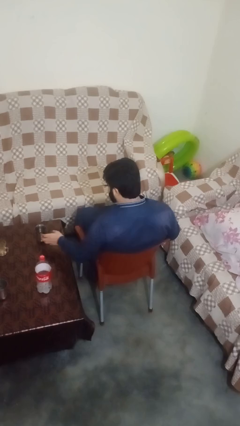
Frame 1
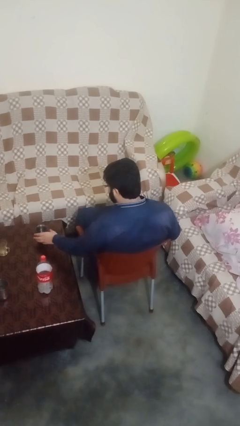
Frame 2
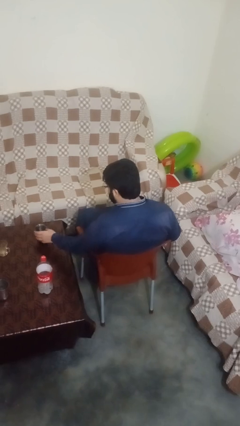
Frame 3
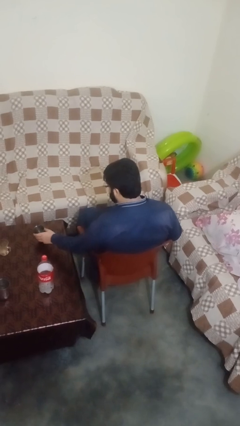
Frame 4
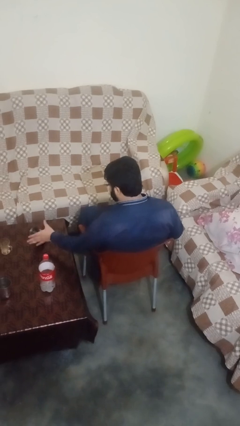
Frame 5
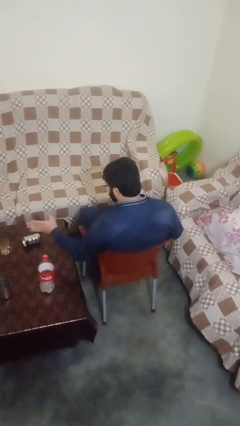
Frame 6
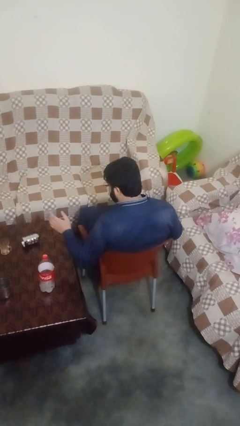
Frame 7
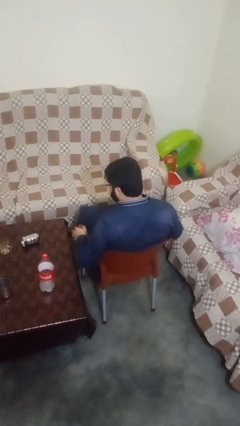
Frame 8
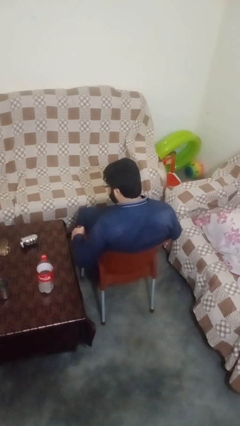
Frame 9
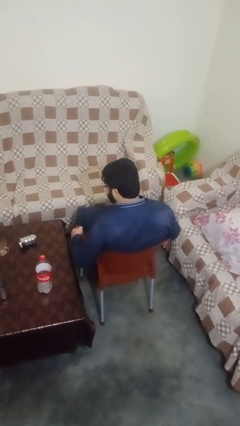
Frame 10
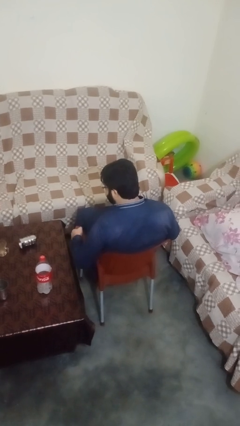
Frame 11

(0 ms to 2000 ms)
person knocks over glass

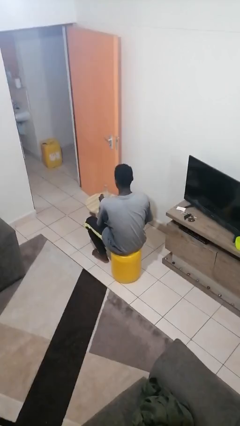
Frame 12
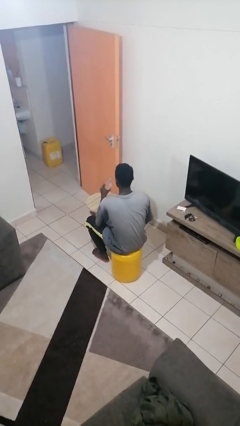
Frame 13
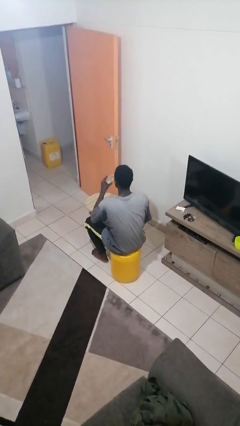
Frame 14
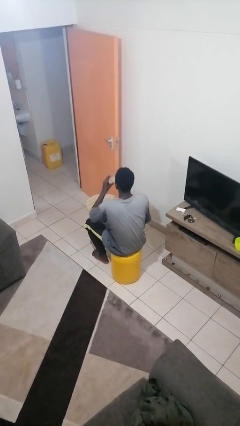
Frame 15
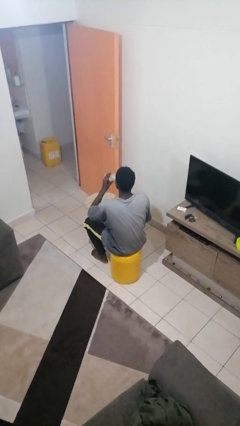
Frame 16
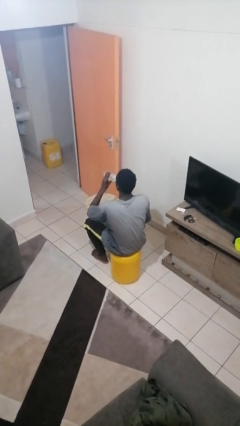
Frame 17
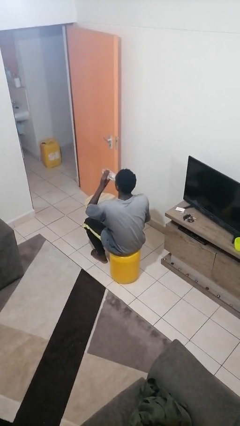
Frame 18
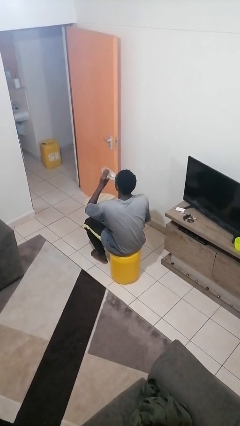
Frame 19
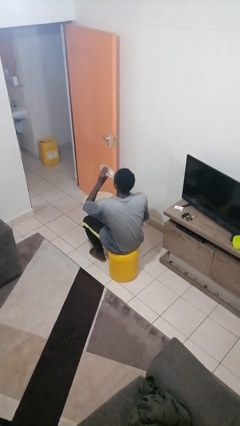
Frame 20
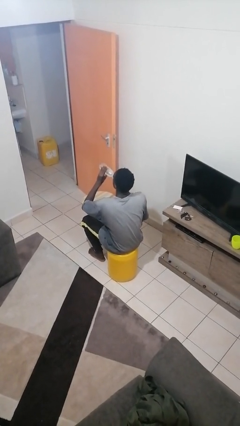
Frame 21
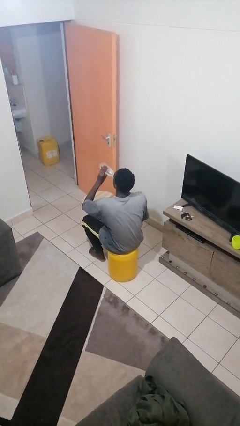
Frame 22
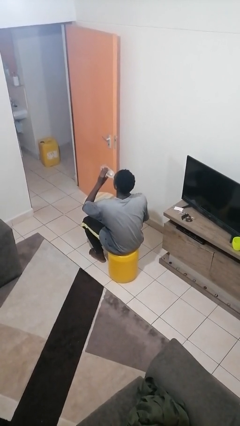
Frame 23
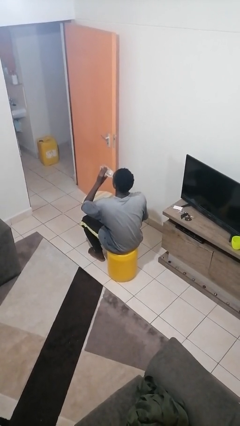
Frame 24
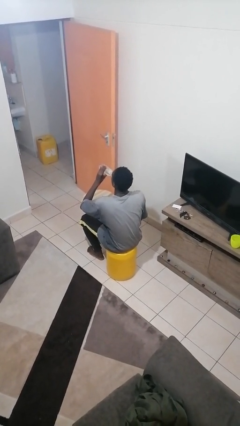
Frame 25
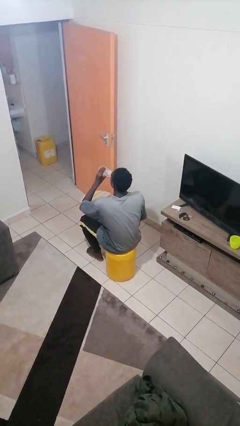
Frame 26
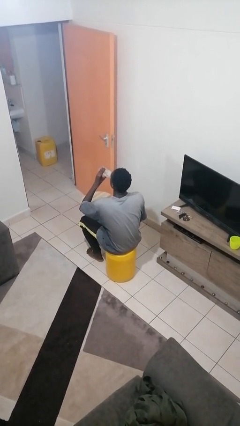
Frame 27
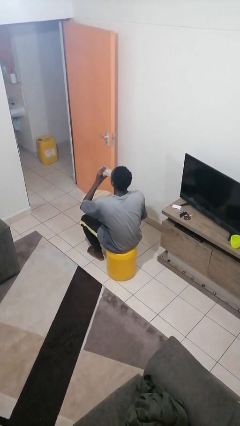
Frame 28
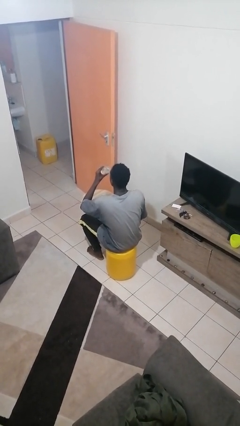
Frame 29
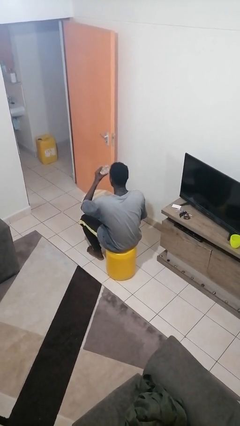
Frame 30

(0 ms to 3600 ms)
person drinks from bottle

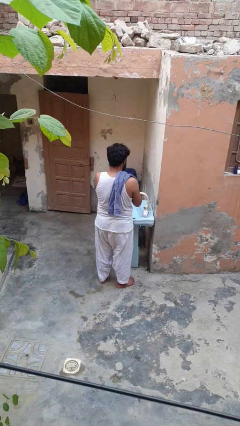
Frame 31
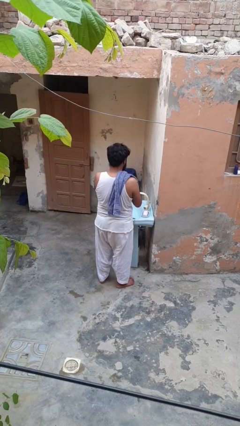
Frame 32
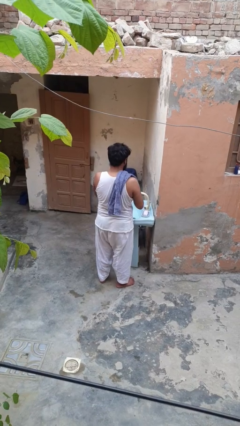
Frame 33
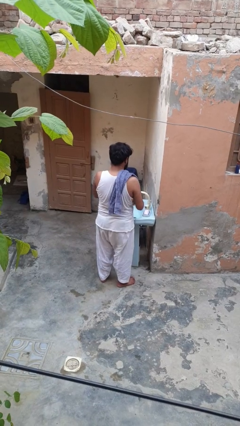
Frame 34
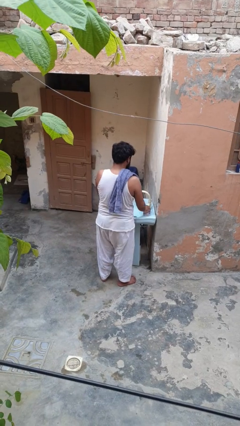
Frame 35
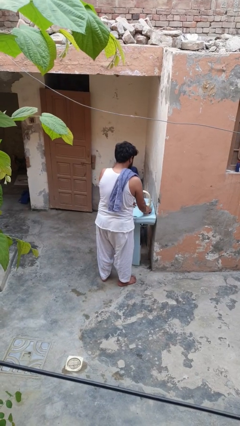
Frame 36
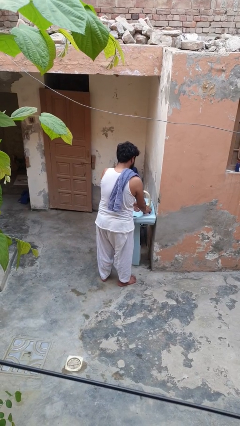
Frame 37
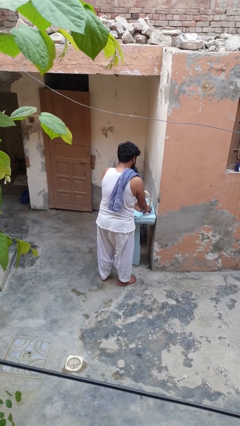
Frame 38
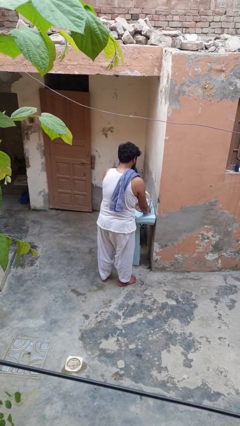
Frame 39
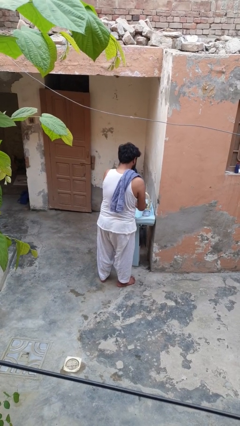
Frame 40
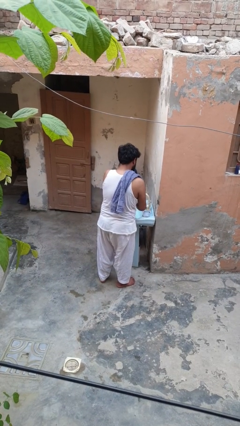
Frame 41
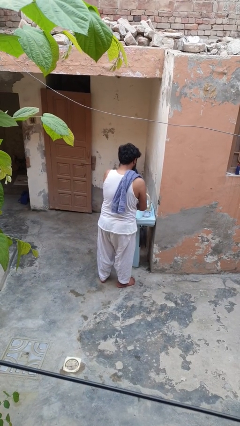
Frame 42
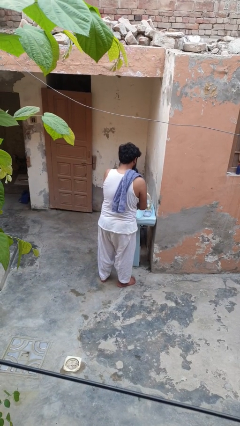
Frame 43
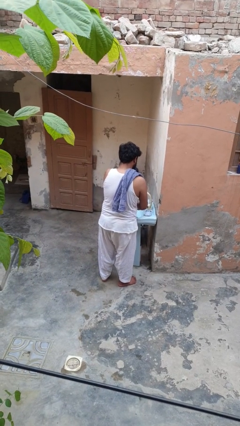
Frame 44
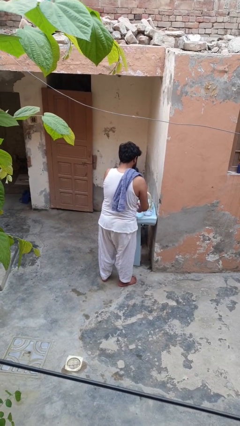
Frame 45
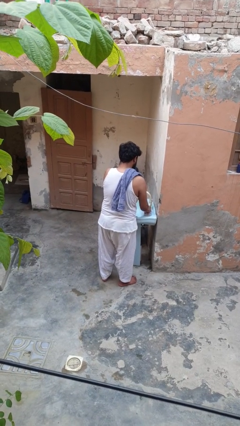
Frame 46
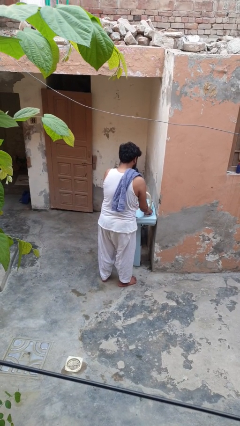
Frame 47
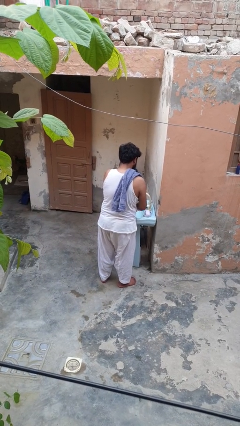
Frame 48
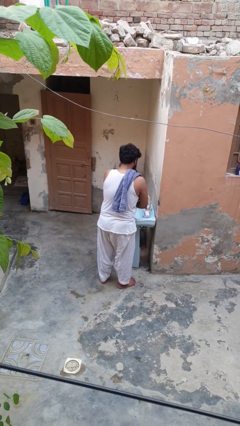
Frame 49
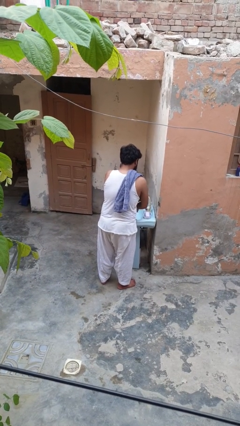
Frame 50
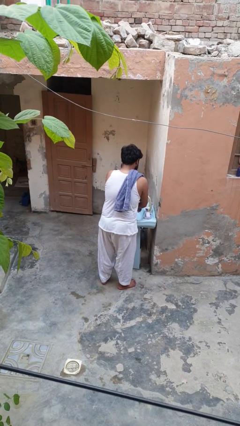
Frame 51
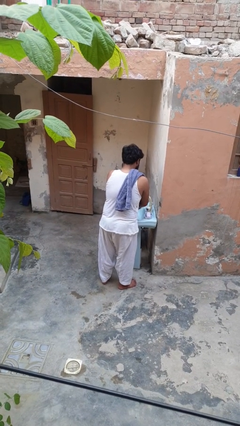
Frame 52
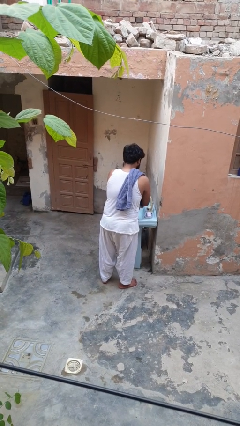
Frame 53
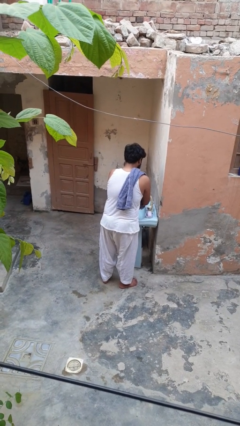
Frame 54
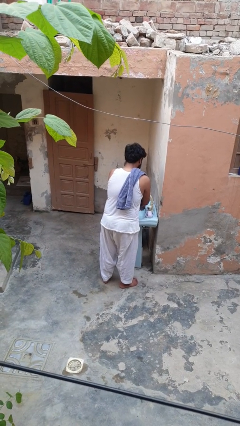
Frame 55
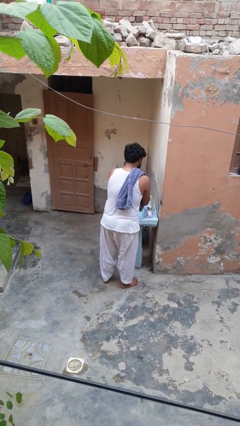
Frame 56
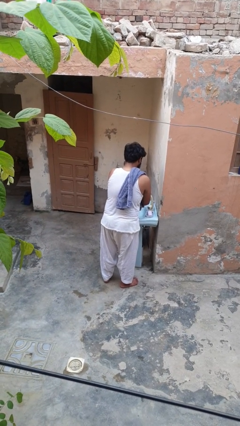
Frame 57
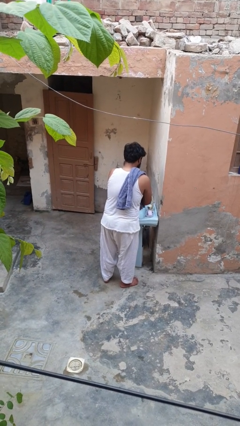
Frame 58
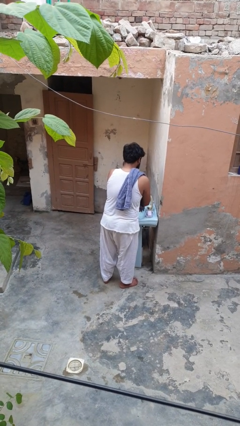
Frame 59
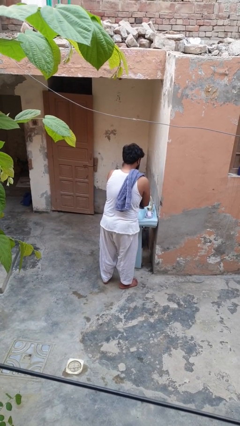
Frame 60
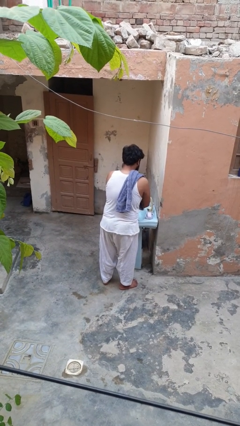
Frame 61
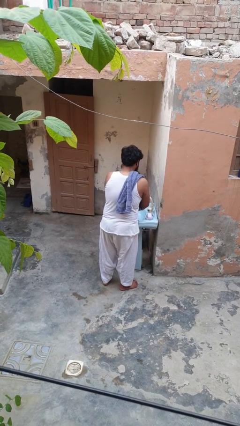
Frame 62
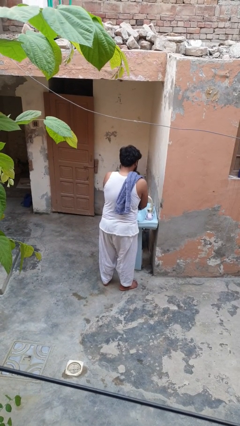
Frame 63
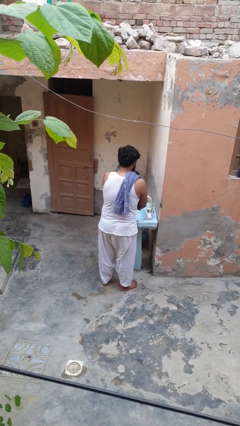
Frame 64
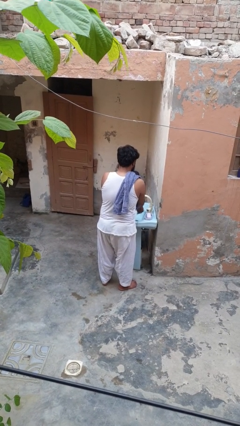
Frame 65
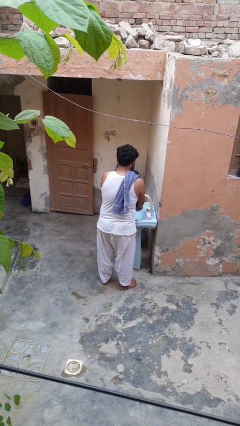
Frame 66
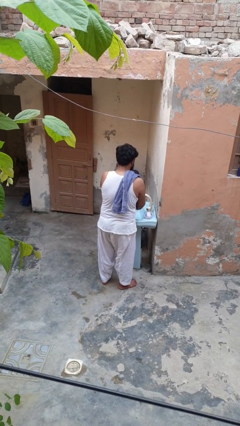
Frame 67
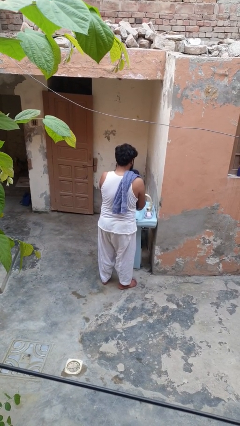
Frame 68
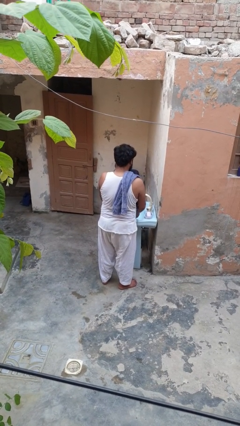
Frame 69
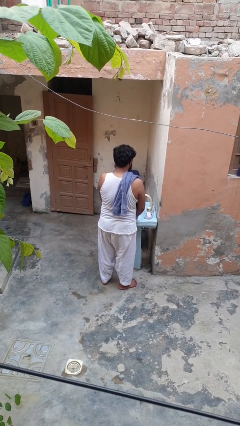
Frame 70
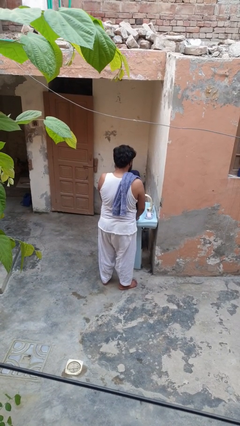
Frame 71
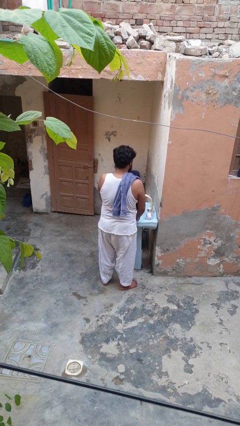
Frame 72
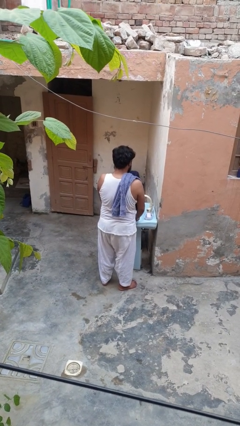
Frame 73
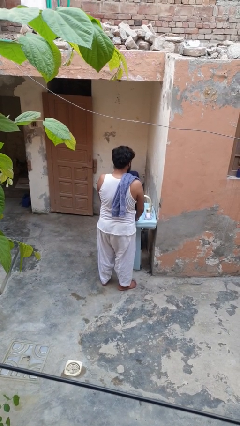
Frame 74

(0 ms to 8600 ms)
person washes hands

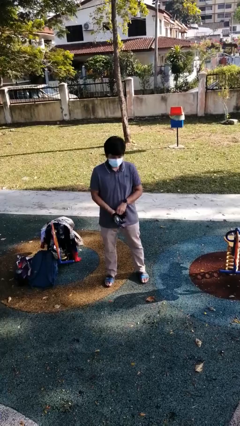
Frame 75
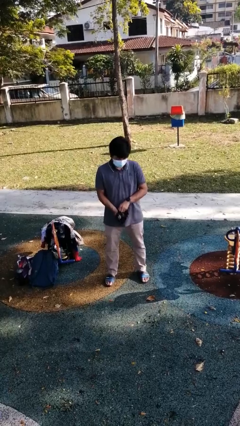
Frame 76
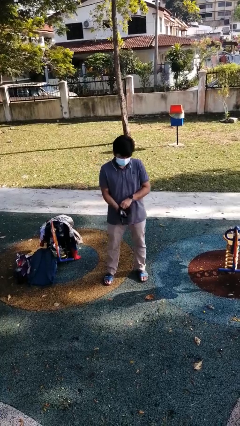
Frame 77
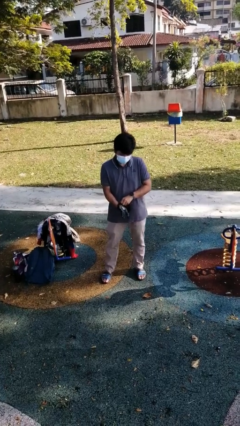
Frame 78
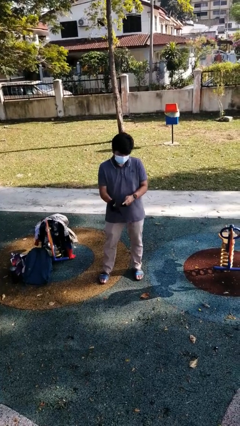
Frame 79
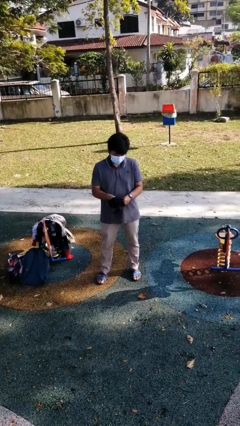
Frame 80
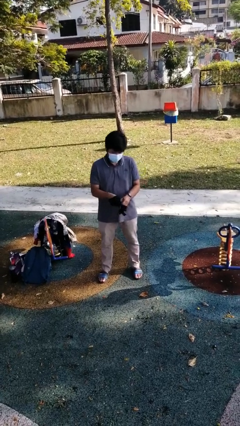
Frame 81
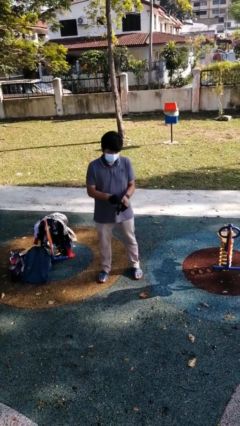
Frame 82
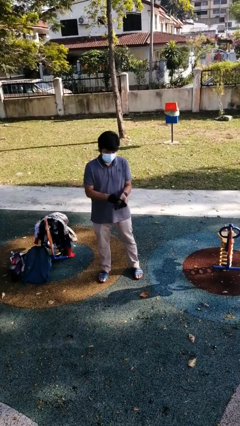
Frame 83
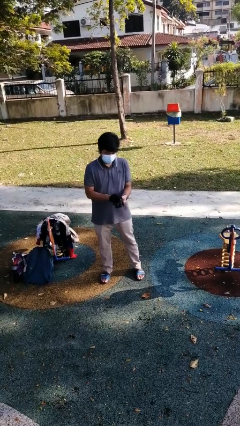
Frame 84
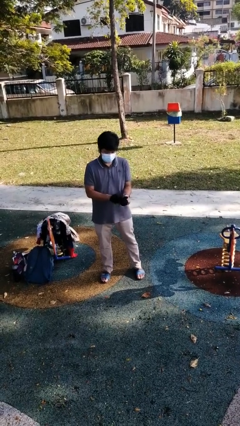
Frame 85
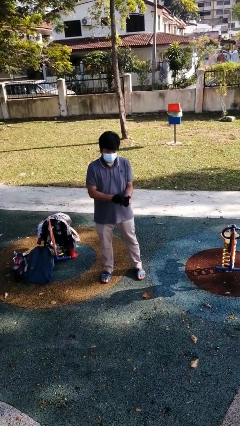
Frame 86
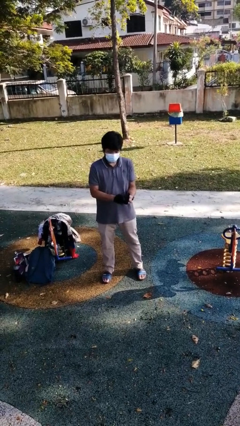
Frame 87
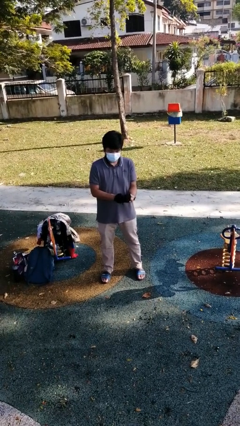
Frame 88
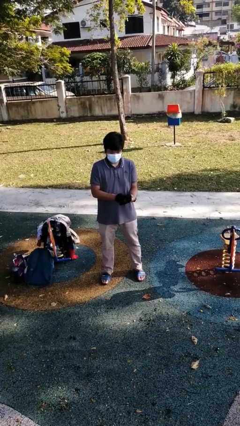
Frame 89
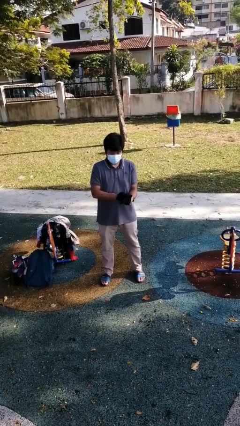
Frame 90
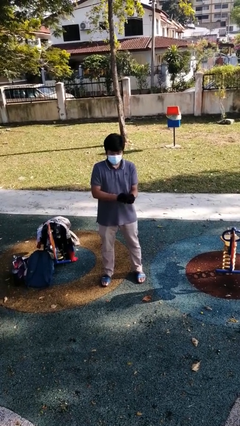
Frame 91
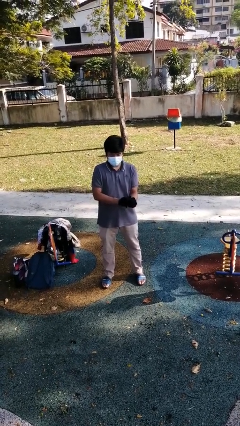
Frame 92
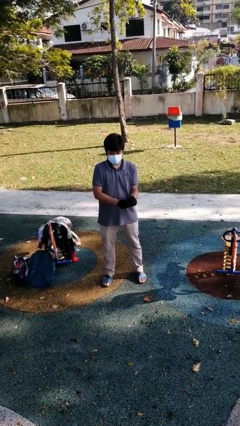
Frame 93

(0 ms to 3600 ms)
person puts on gloves
